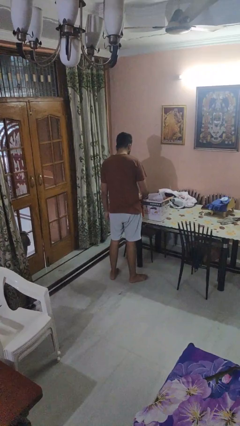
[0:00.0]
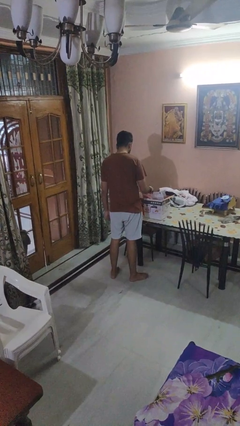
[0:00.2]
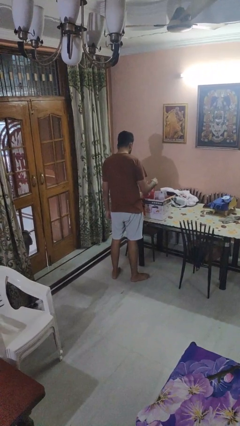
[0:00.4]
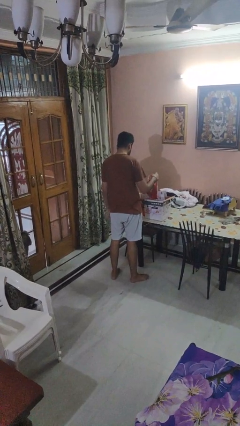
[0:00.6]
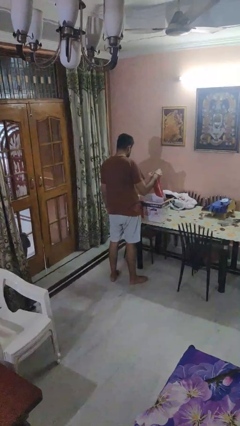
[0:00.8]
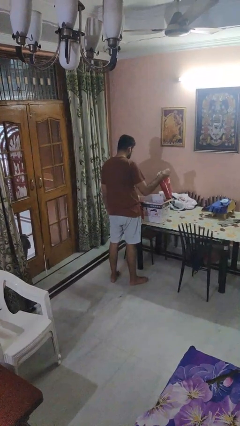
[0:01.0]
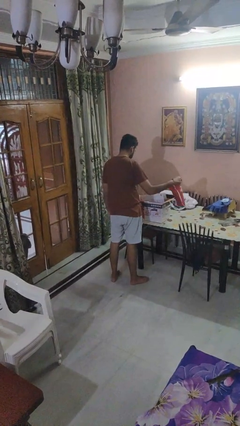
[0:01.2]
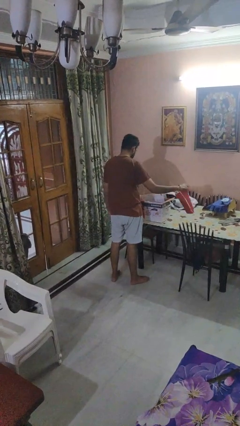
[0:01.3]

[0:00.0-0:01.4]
person takes object from box

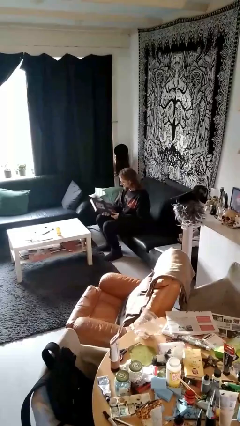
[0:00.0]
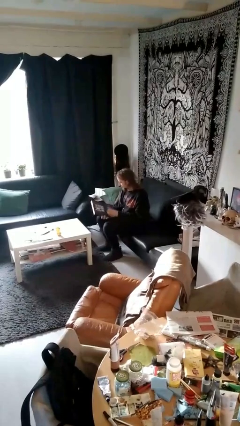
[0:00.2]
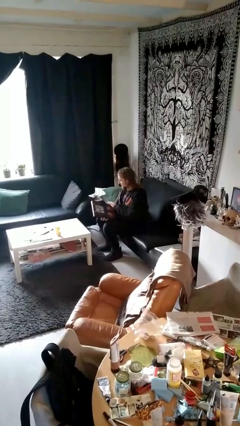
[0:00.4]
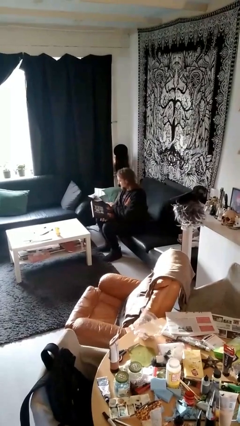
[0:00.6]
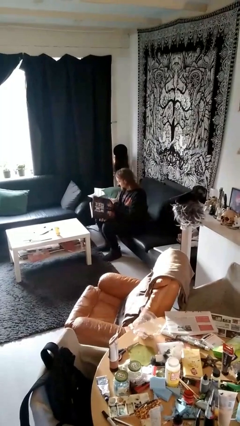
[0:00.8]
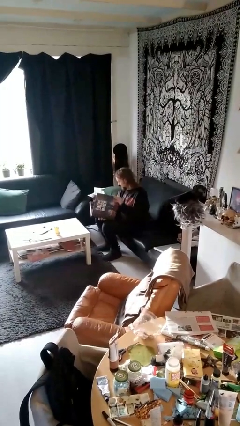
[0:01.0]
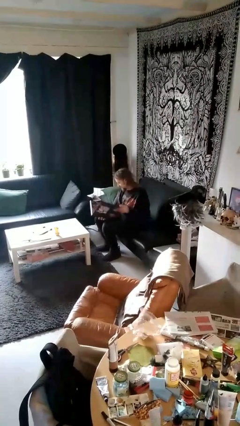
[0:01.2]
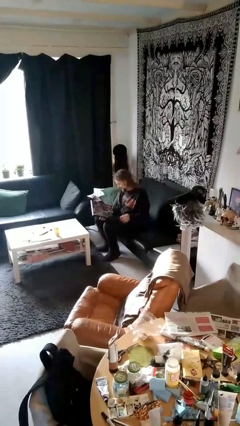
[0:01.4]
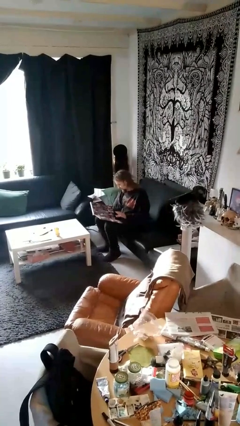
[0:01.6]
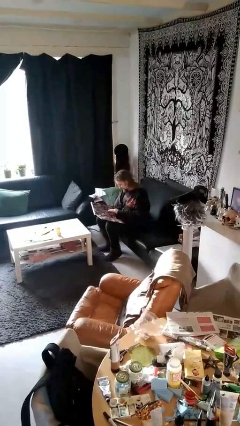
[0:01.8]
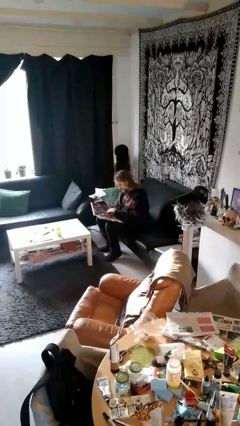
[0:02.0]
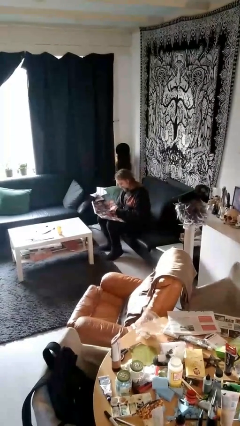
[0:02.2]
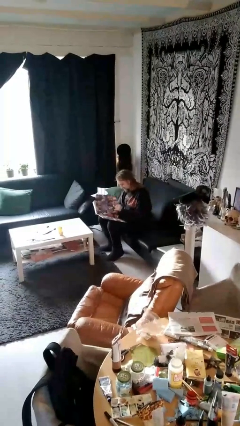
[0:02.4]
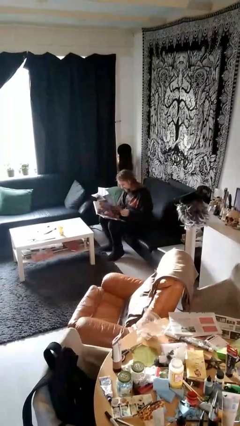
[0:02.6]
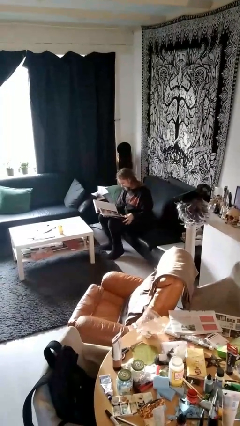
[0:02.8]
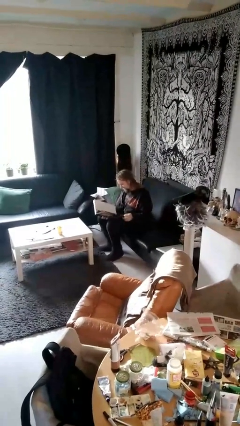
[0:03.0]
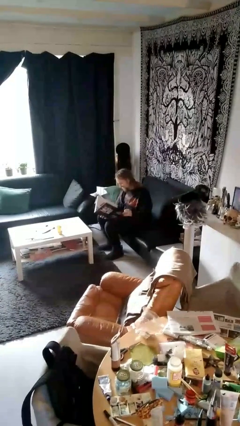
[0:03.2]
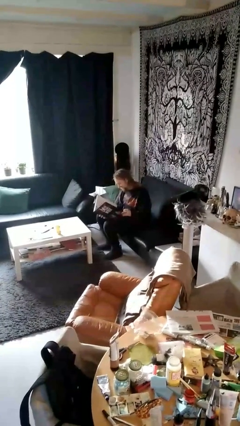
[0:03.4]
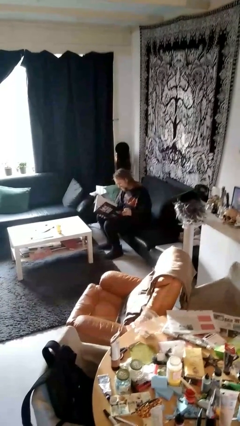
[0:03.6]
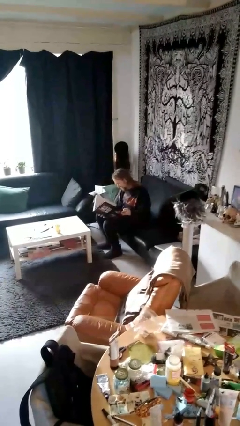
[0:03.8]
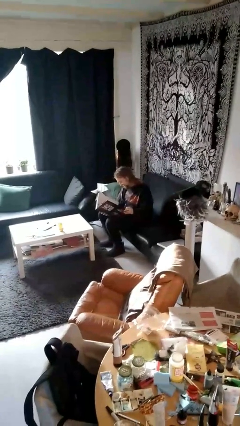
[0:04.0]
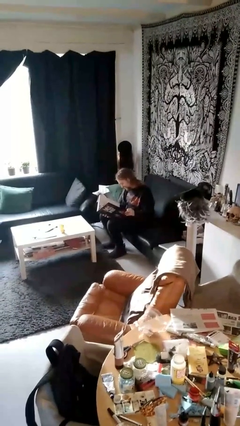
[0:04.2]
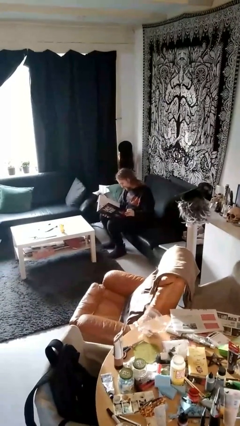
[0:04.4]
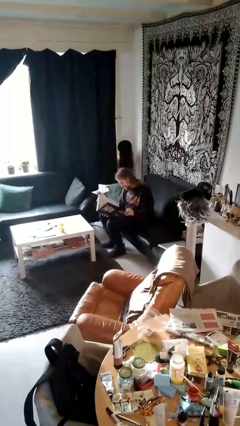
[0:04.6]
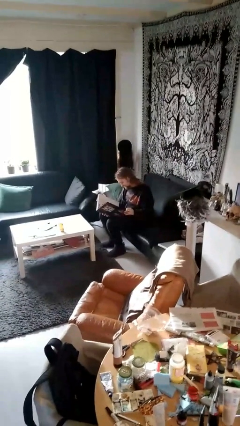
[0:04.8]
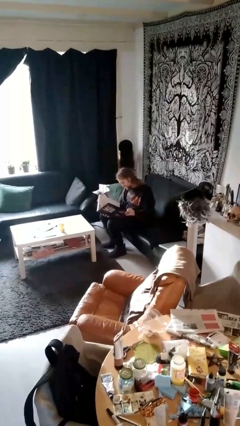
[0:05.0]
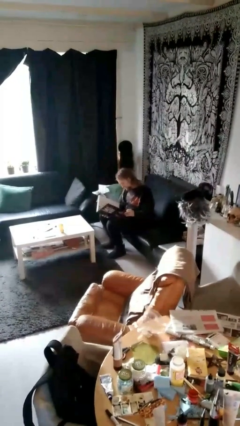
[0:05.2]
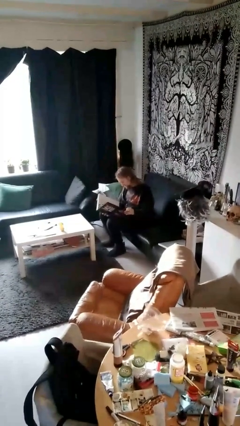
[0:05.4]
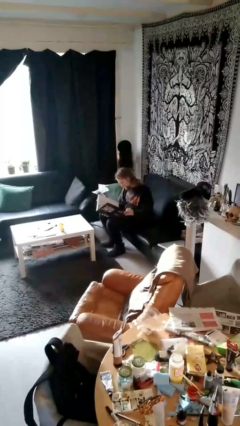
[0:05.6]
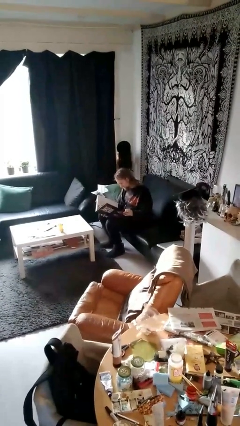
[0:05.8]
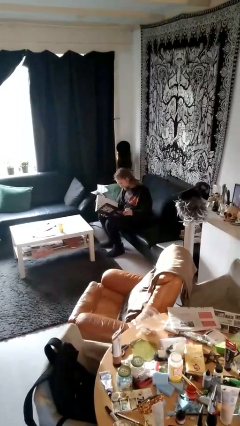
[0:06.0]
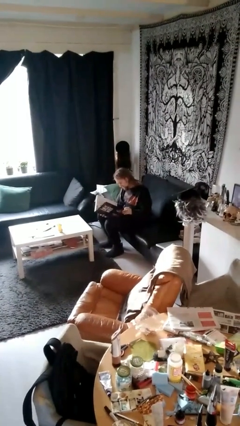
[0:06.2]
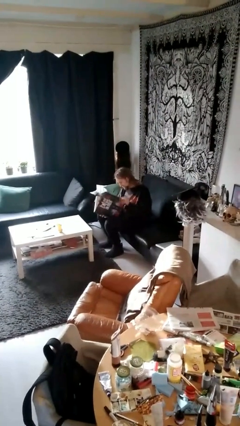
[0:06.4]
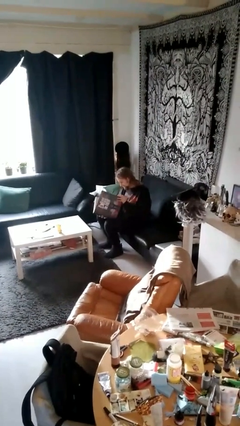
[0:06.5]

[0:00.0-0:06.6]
person reads document

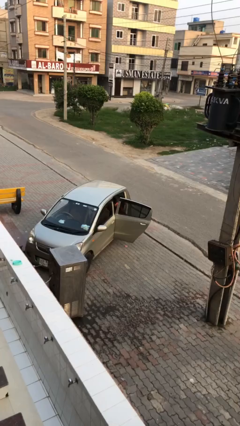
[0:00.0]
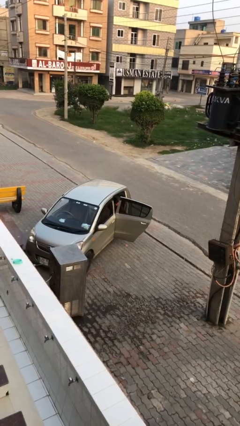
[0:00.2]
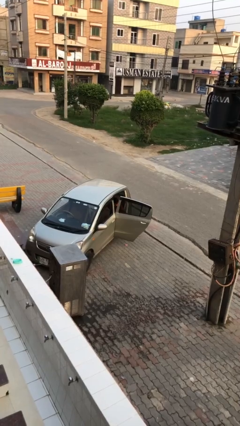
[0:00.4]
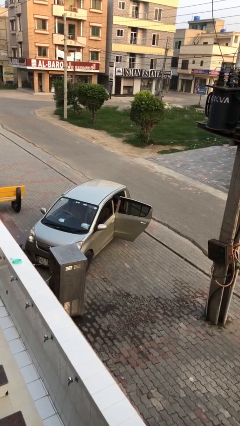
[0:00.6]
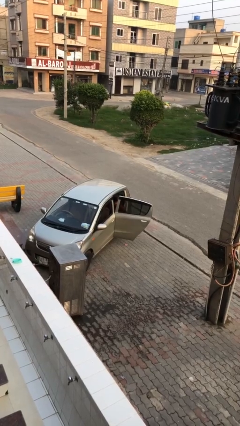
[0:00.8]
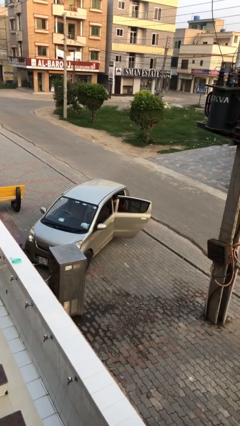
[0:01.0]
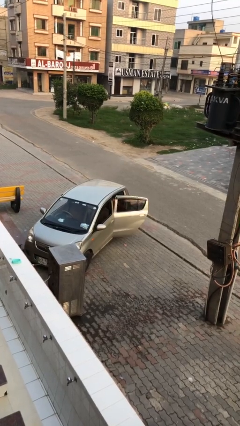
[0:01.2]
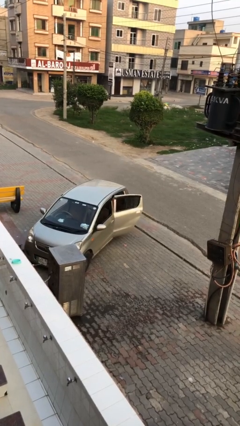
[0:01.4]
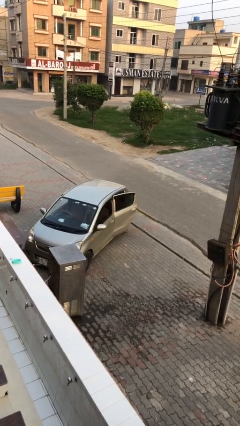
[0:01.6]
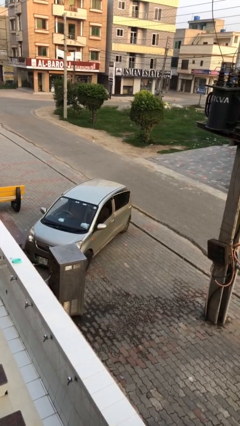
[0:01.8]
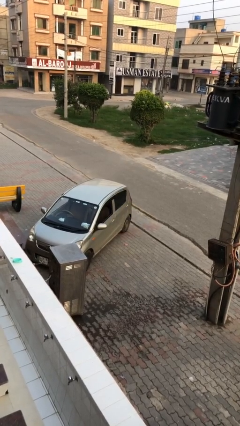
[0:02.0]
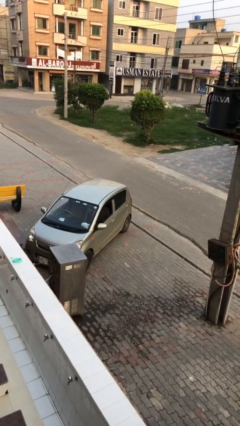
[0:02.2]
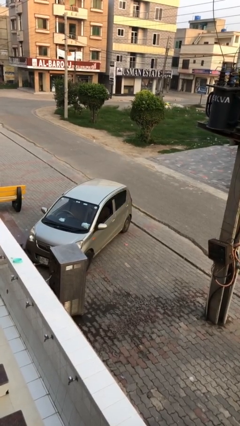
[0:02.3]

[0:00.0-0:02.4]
person closes car door

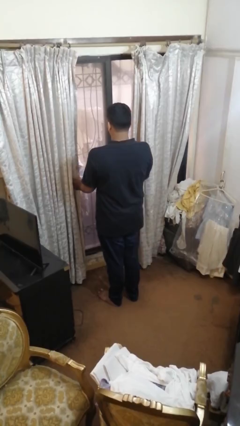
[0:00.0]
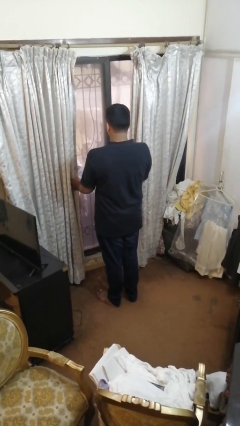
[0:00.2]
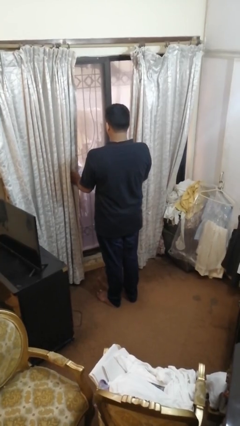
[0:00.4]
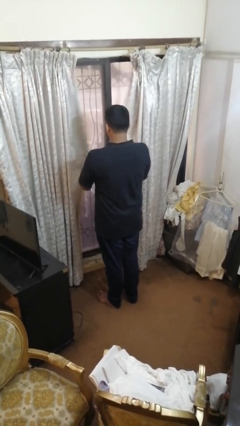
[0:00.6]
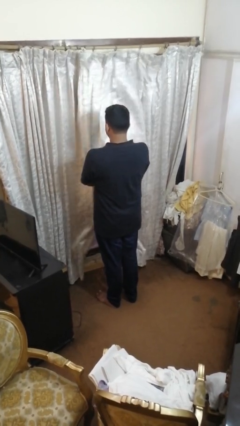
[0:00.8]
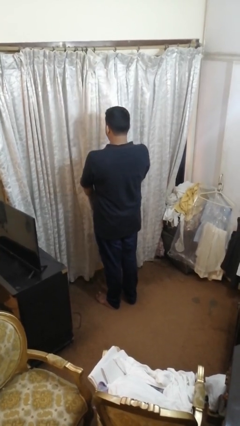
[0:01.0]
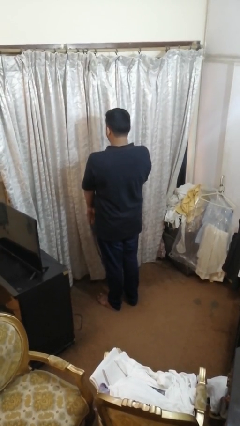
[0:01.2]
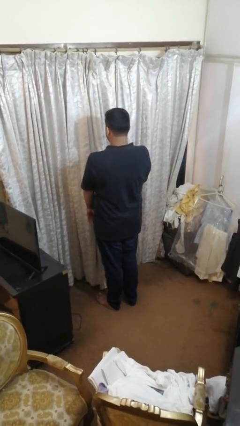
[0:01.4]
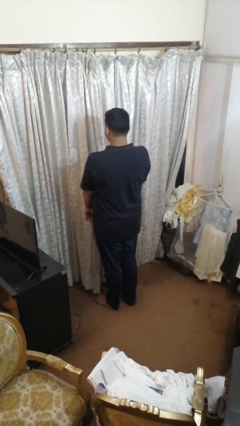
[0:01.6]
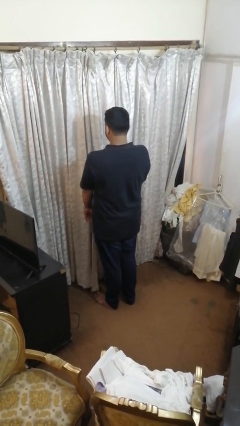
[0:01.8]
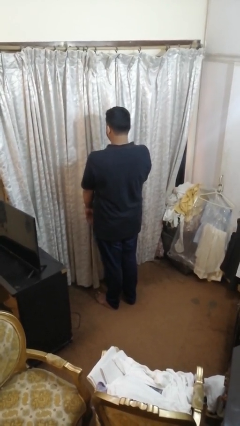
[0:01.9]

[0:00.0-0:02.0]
person closes curtains

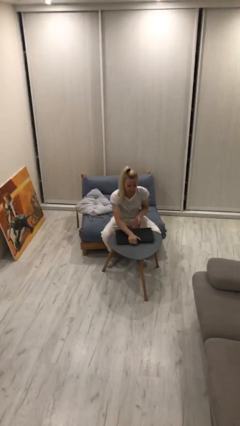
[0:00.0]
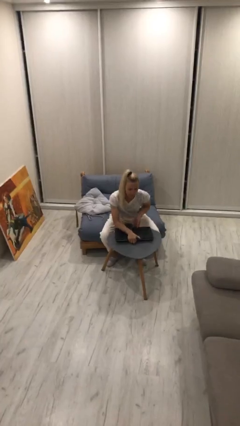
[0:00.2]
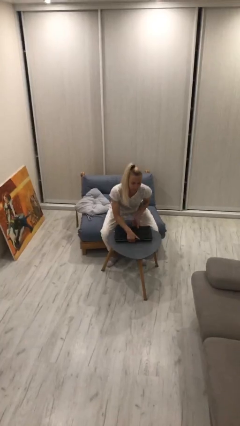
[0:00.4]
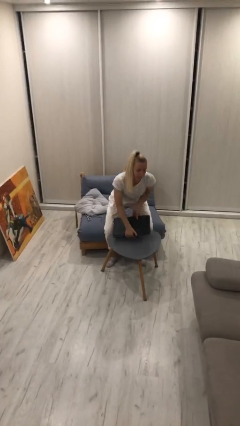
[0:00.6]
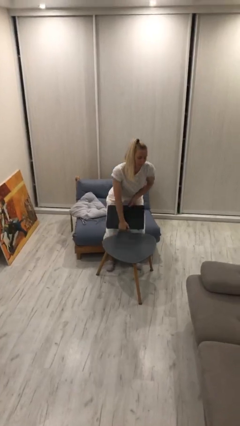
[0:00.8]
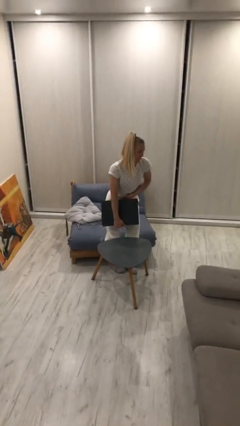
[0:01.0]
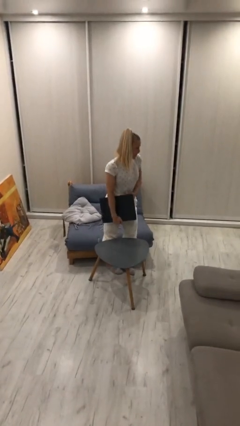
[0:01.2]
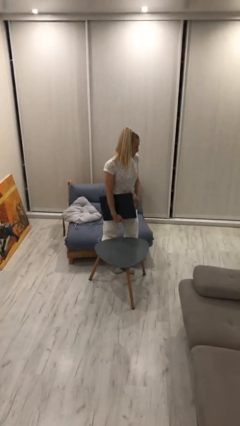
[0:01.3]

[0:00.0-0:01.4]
person stands up

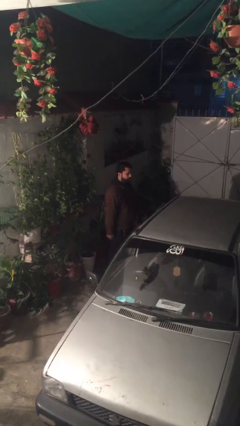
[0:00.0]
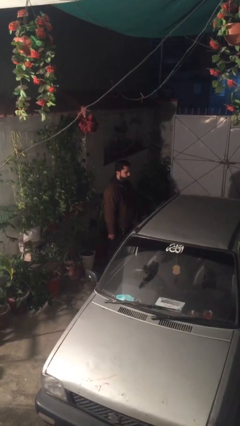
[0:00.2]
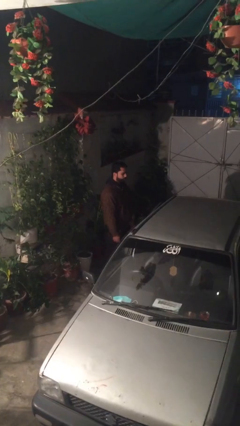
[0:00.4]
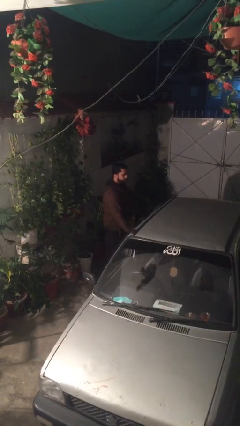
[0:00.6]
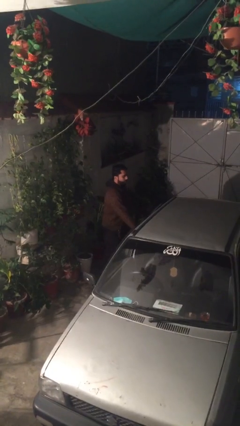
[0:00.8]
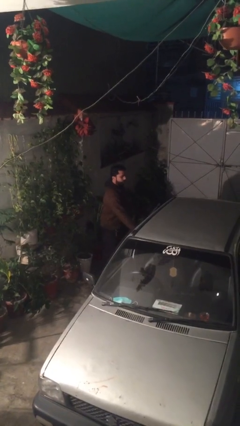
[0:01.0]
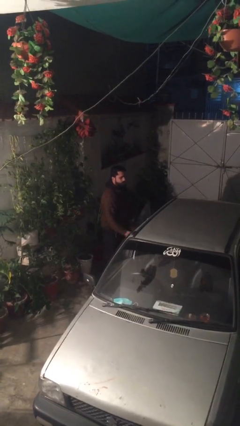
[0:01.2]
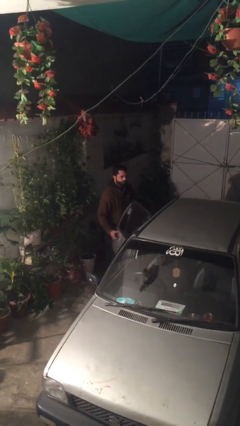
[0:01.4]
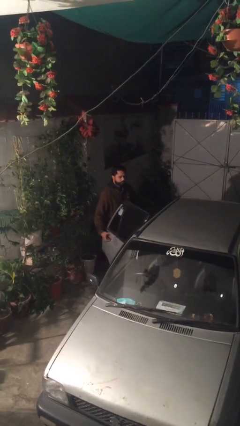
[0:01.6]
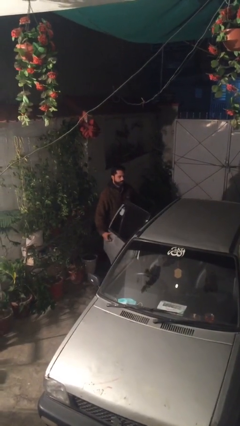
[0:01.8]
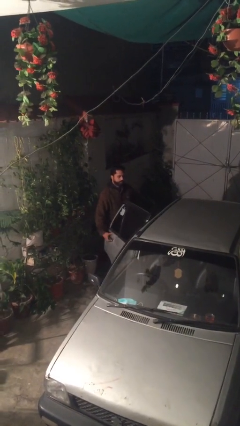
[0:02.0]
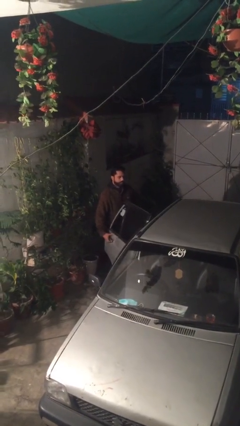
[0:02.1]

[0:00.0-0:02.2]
person opens car door

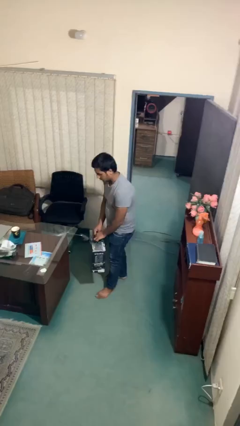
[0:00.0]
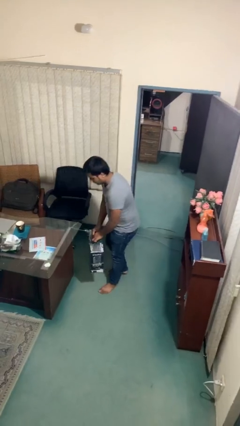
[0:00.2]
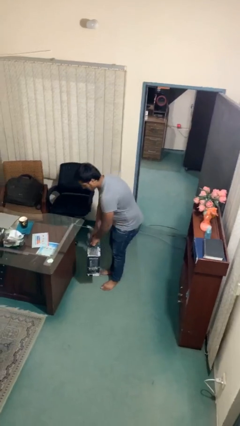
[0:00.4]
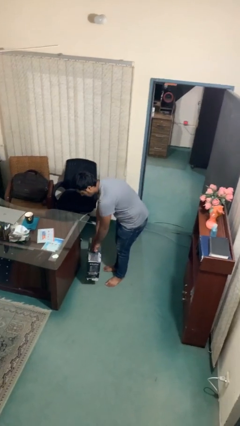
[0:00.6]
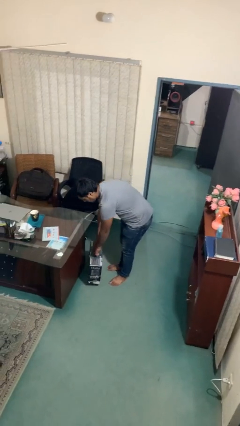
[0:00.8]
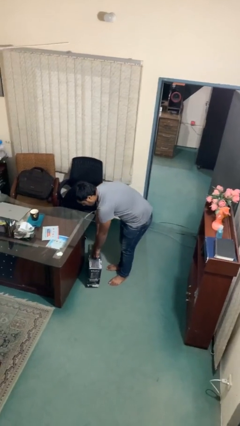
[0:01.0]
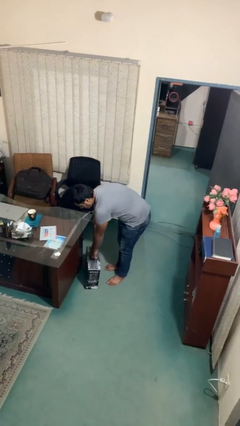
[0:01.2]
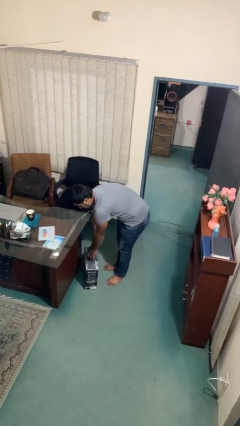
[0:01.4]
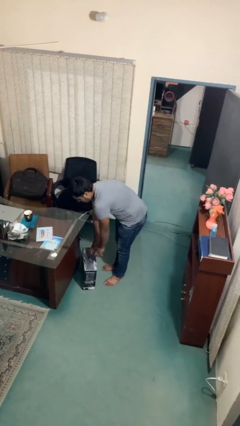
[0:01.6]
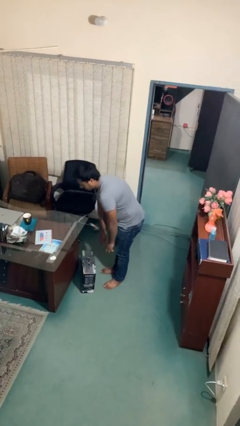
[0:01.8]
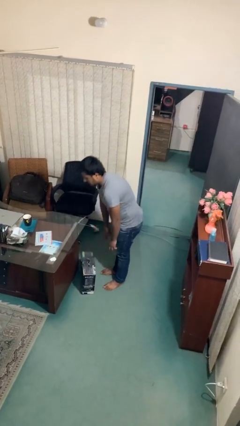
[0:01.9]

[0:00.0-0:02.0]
person puts down object on floor
